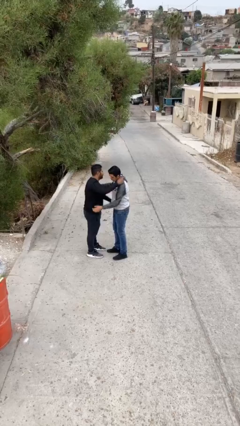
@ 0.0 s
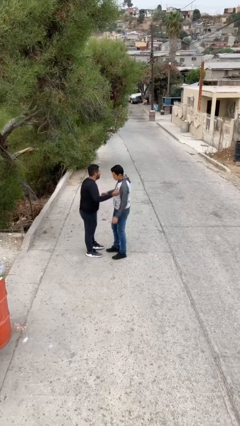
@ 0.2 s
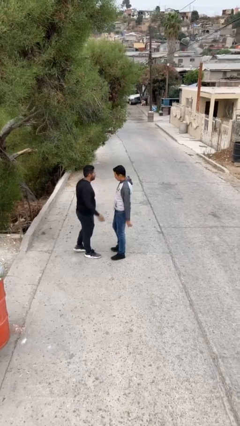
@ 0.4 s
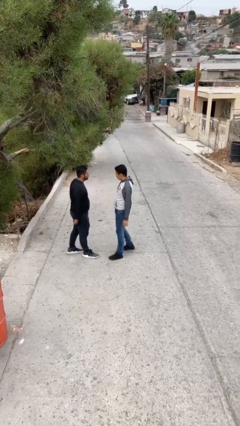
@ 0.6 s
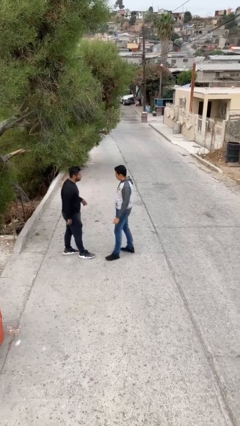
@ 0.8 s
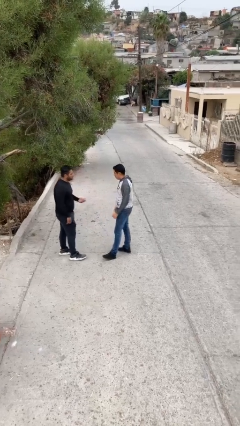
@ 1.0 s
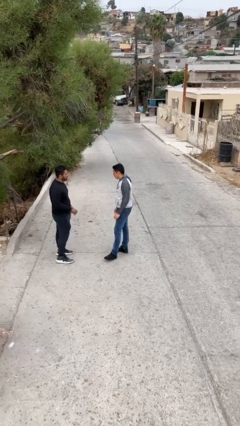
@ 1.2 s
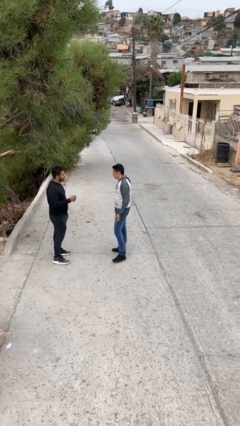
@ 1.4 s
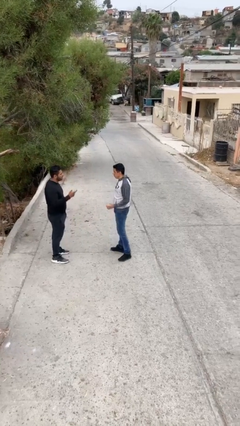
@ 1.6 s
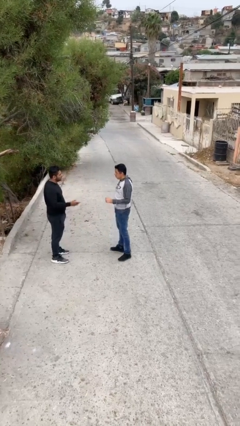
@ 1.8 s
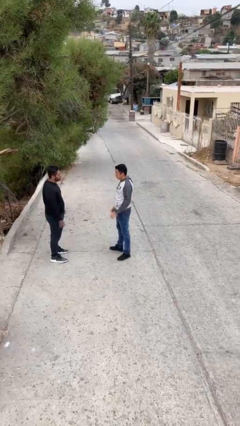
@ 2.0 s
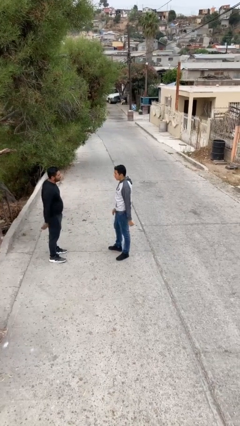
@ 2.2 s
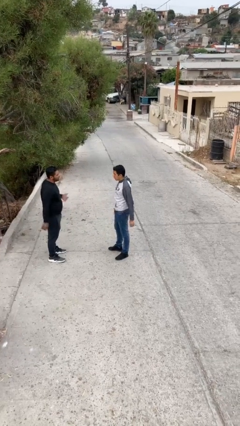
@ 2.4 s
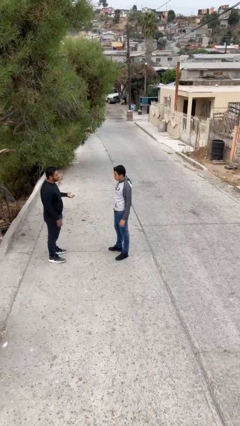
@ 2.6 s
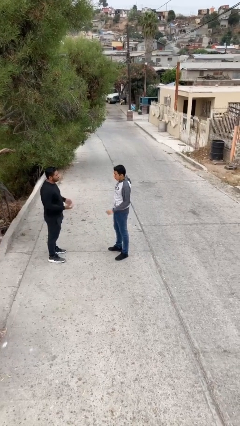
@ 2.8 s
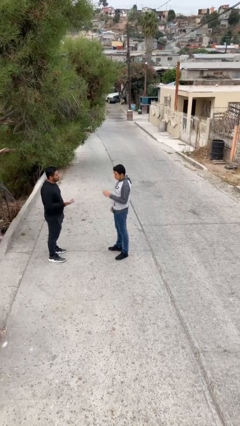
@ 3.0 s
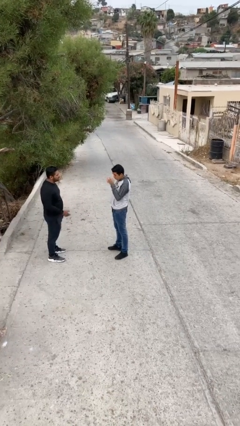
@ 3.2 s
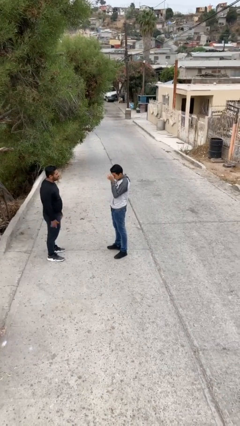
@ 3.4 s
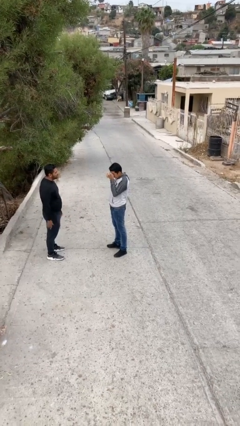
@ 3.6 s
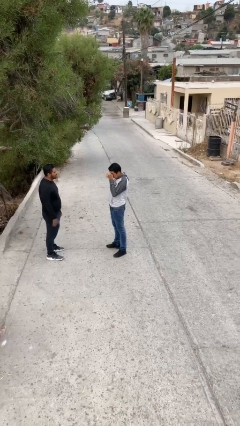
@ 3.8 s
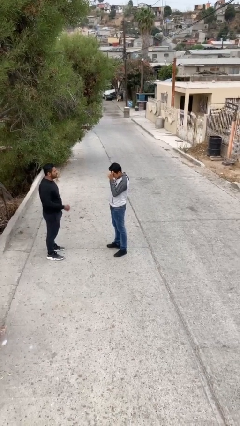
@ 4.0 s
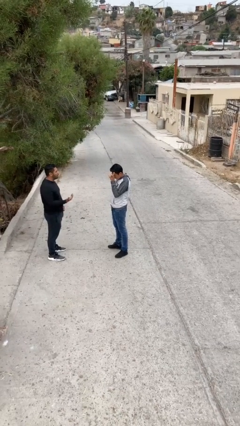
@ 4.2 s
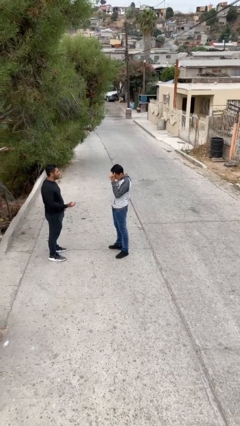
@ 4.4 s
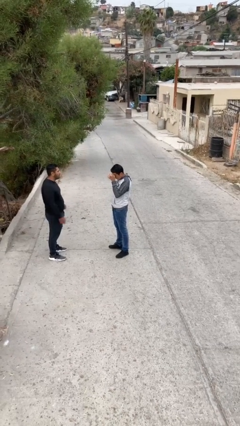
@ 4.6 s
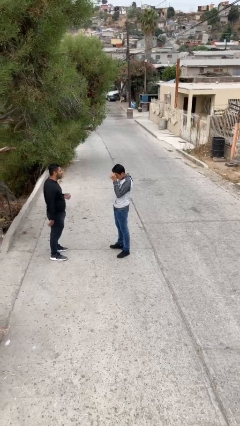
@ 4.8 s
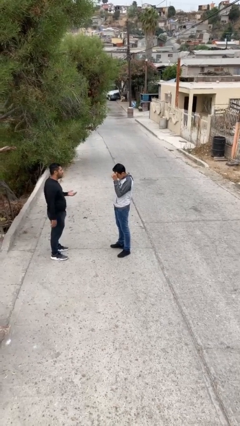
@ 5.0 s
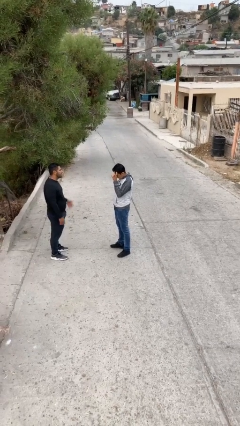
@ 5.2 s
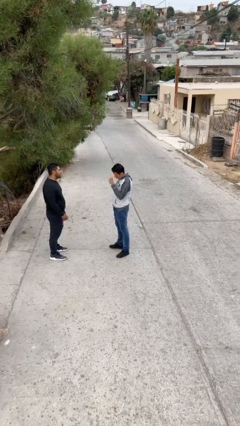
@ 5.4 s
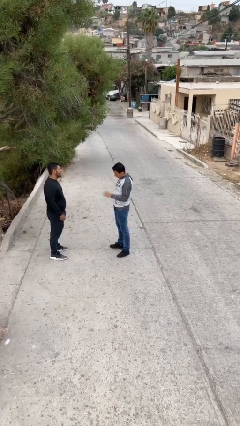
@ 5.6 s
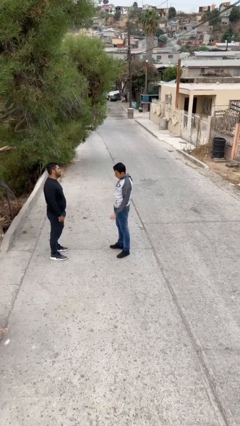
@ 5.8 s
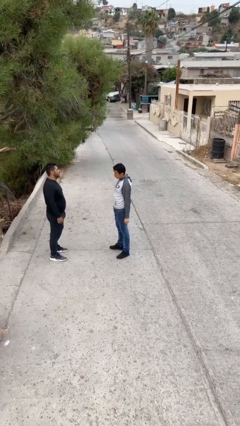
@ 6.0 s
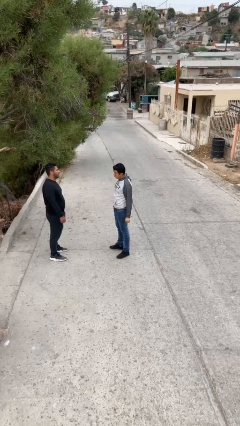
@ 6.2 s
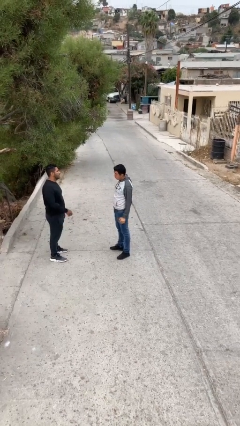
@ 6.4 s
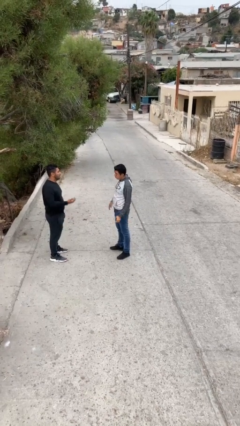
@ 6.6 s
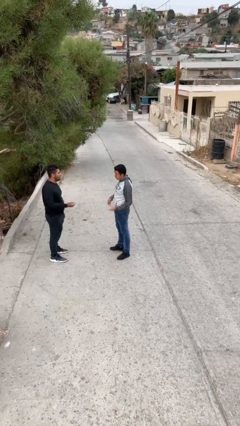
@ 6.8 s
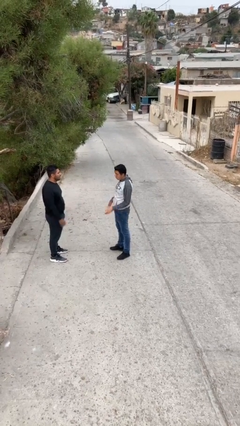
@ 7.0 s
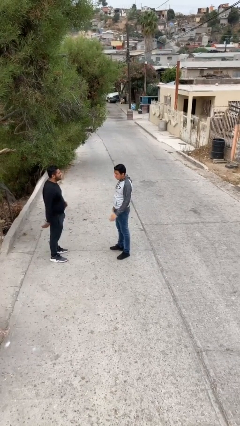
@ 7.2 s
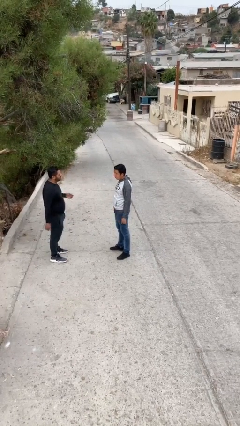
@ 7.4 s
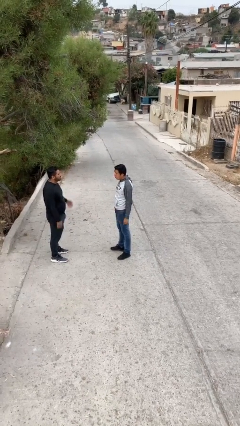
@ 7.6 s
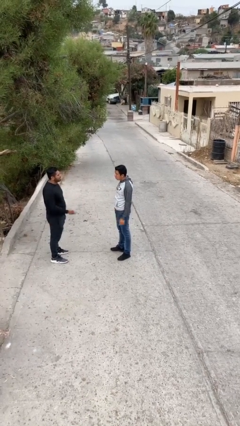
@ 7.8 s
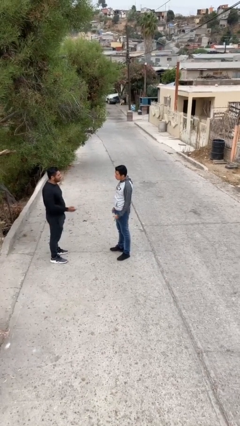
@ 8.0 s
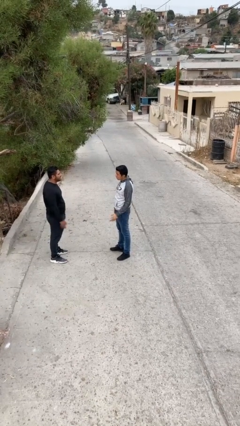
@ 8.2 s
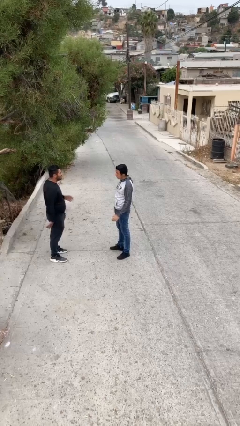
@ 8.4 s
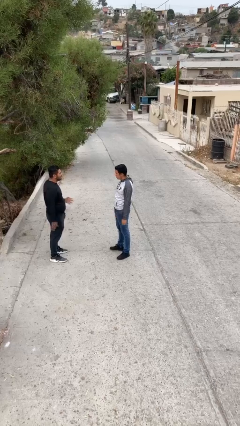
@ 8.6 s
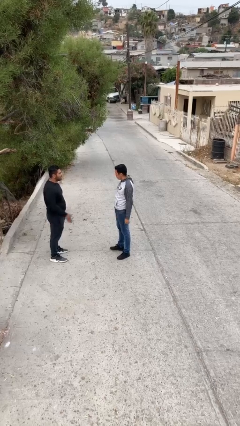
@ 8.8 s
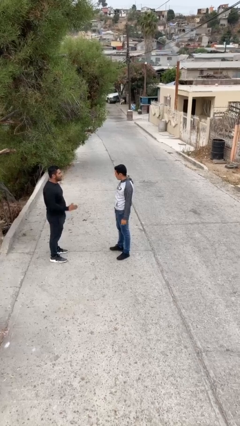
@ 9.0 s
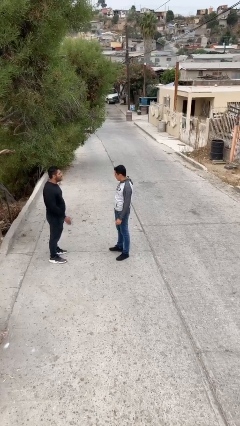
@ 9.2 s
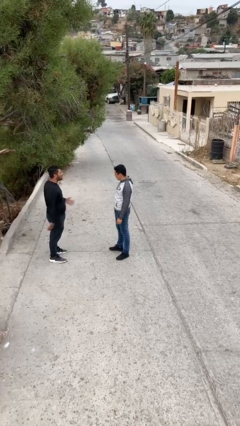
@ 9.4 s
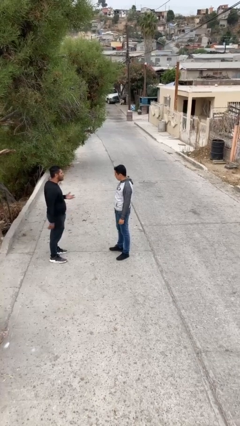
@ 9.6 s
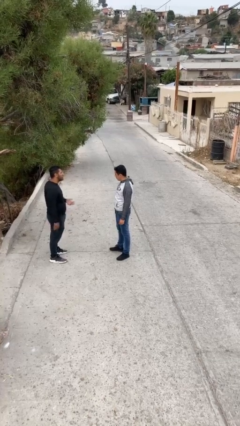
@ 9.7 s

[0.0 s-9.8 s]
person talks to person

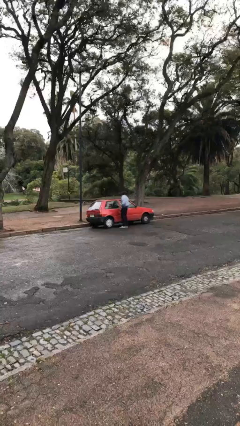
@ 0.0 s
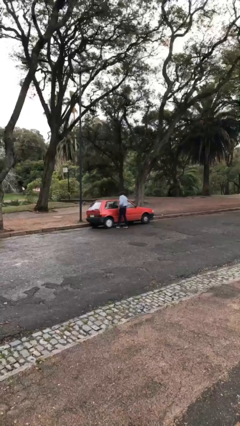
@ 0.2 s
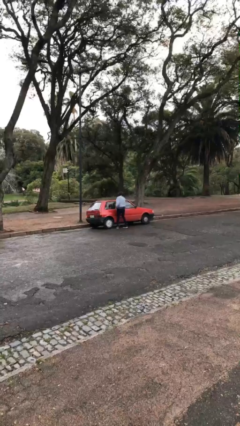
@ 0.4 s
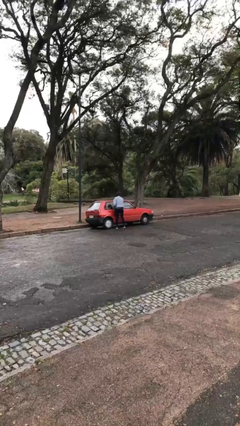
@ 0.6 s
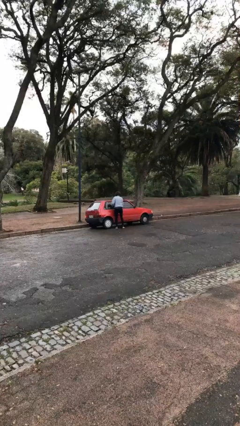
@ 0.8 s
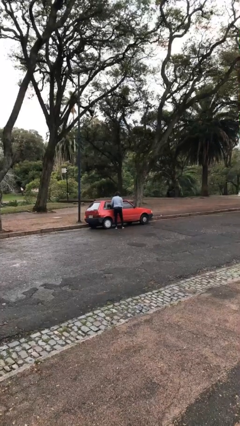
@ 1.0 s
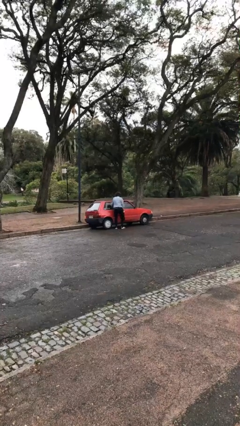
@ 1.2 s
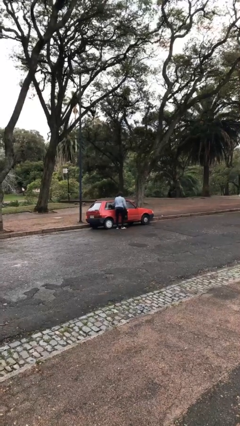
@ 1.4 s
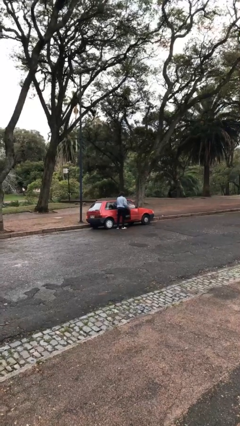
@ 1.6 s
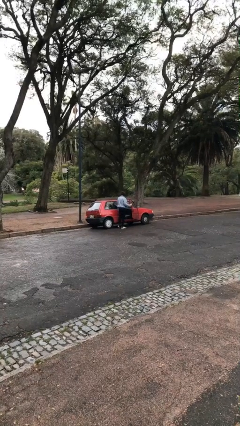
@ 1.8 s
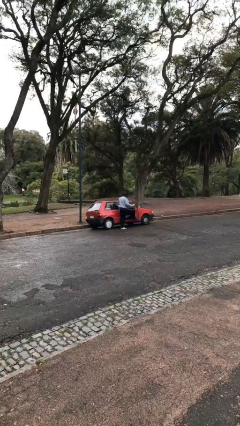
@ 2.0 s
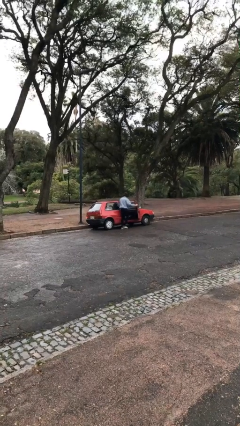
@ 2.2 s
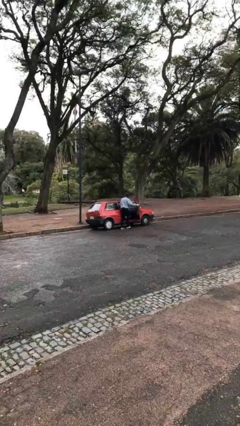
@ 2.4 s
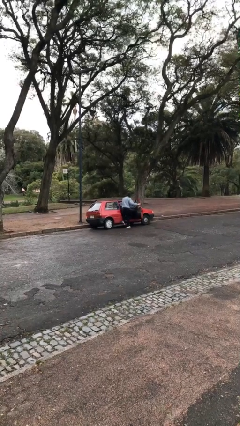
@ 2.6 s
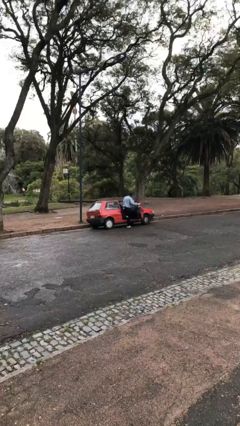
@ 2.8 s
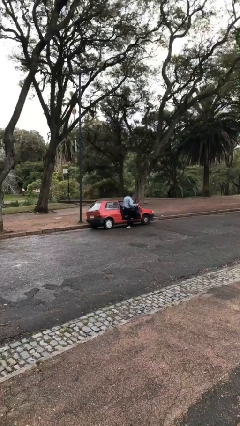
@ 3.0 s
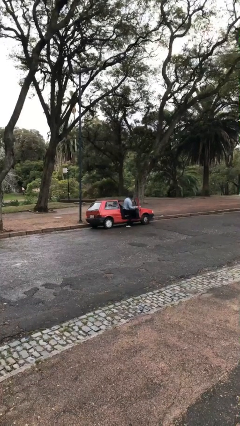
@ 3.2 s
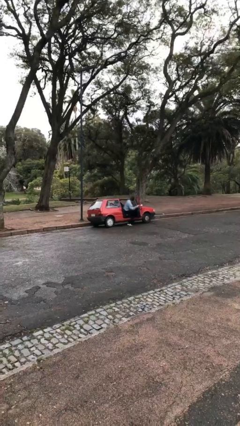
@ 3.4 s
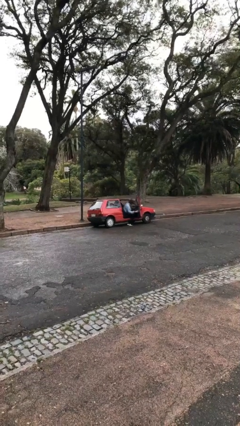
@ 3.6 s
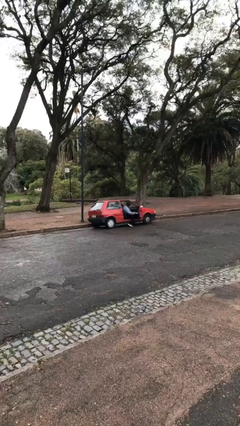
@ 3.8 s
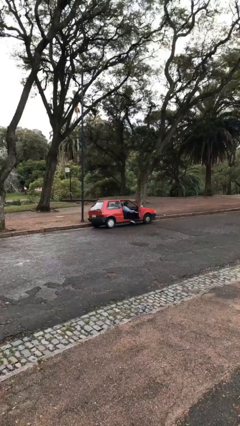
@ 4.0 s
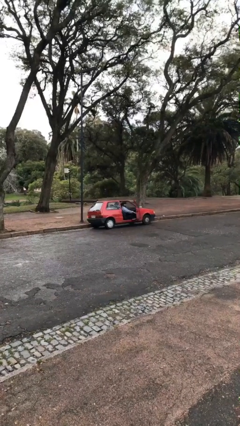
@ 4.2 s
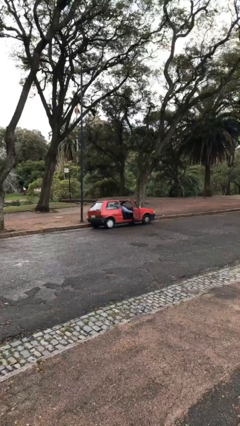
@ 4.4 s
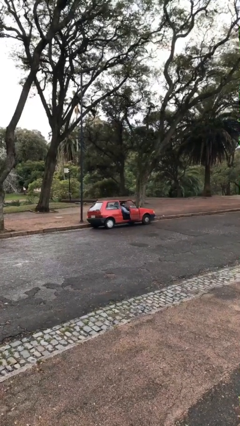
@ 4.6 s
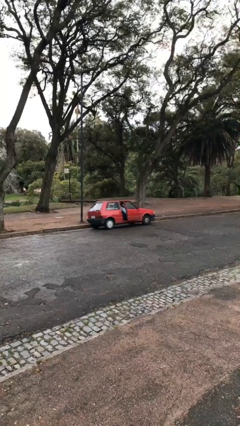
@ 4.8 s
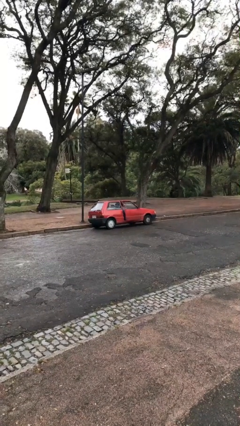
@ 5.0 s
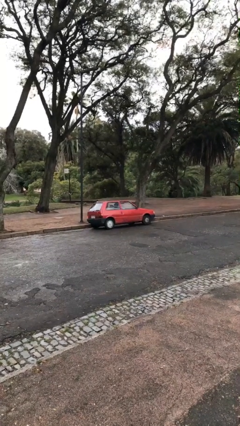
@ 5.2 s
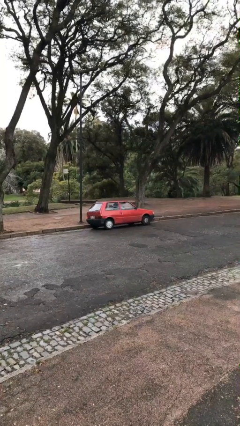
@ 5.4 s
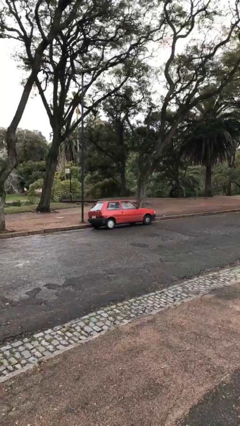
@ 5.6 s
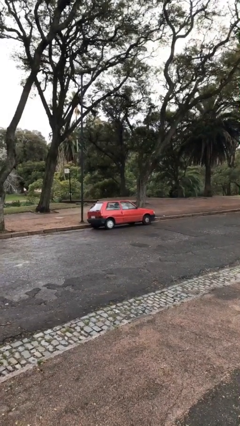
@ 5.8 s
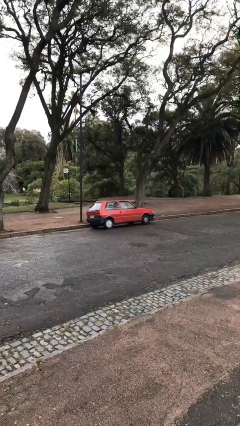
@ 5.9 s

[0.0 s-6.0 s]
car picks up person

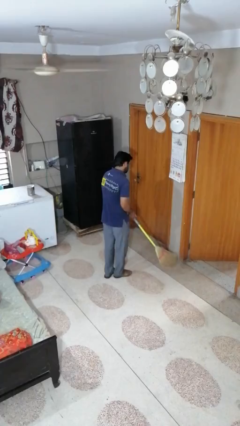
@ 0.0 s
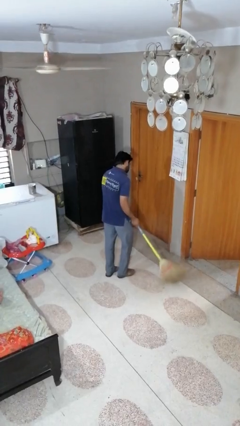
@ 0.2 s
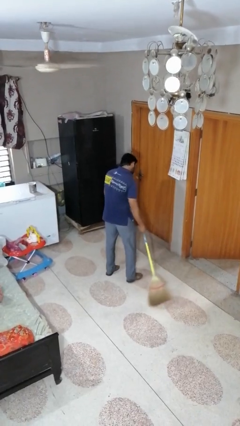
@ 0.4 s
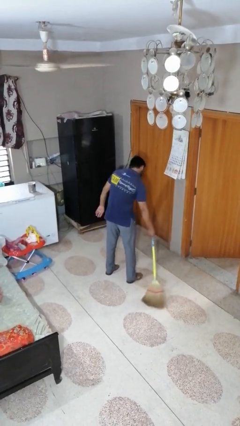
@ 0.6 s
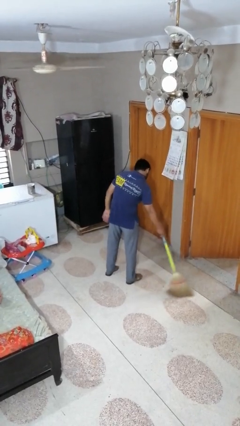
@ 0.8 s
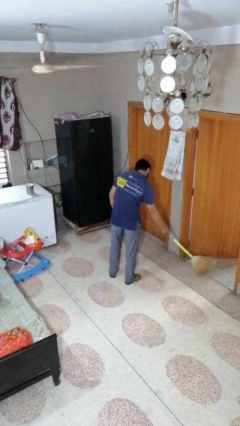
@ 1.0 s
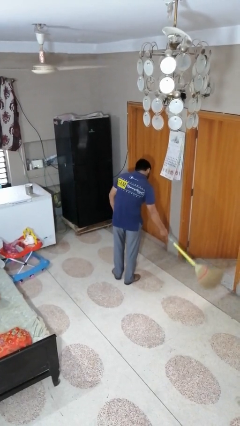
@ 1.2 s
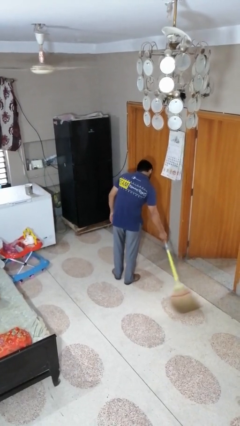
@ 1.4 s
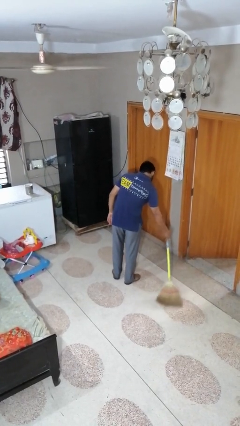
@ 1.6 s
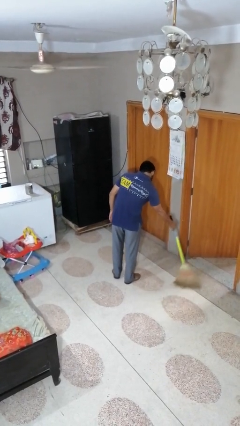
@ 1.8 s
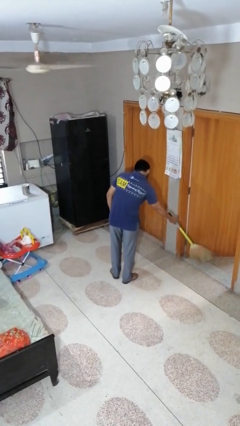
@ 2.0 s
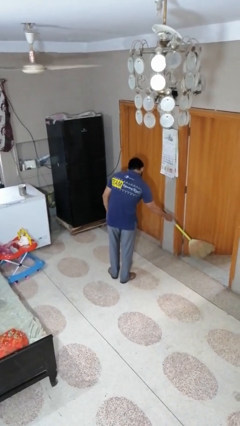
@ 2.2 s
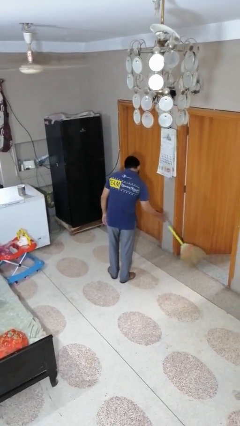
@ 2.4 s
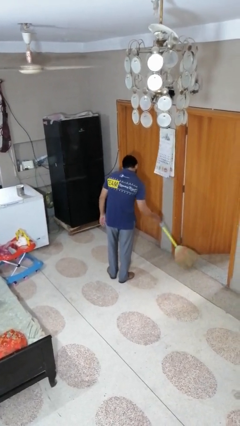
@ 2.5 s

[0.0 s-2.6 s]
person sweeps floor
